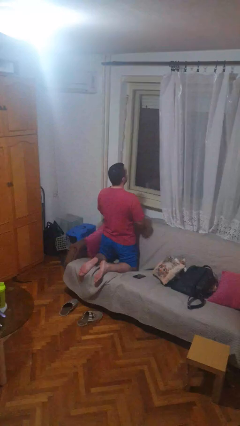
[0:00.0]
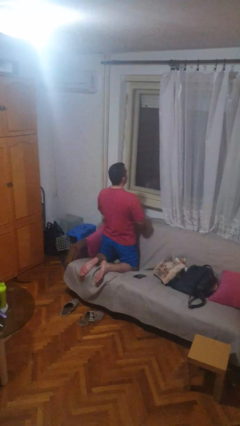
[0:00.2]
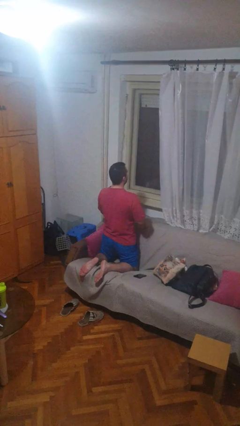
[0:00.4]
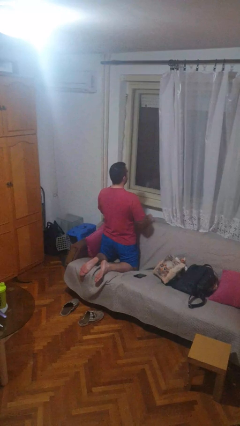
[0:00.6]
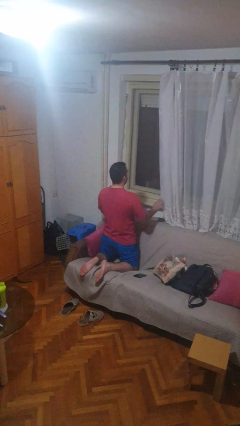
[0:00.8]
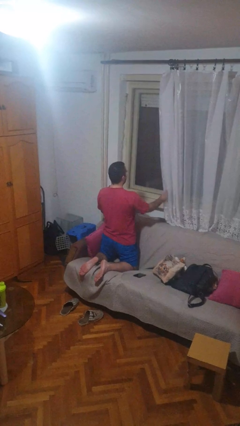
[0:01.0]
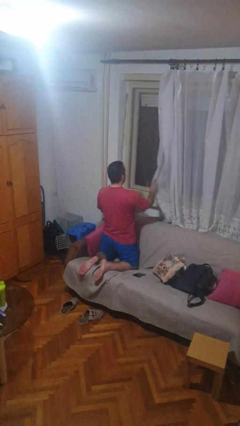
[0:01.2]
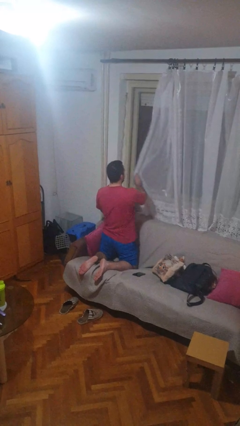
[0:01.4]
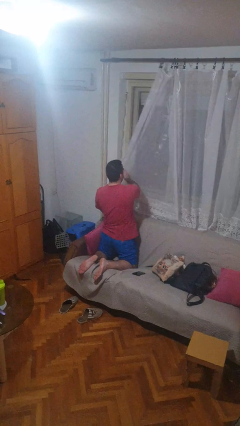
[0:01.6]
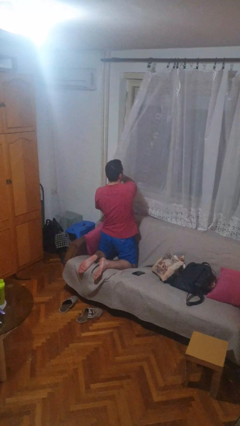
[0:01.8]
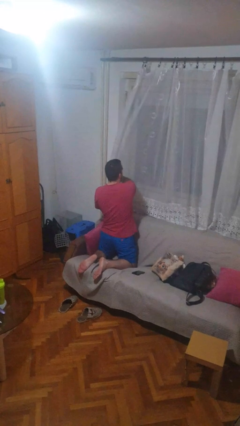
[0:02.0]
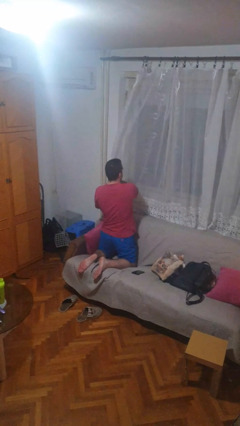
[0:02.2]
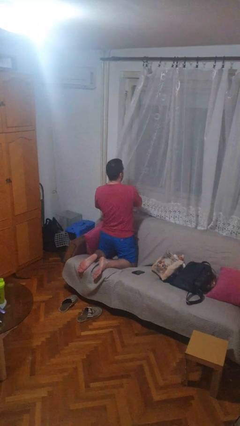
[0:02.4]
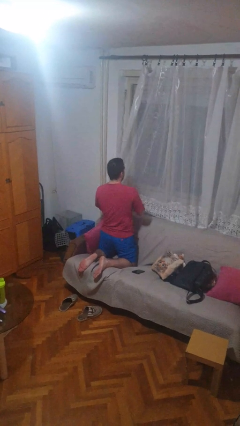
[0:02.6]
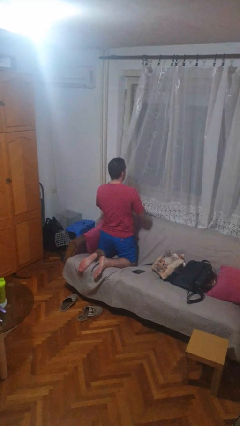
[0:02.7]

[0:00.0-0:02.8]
person closes curtains

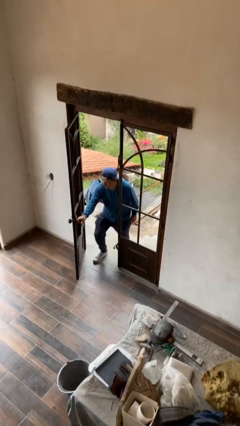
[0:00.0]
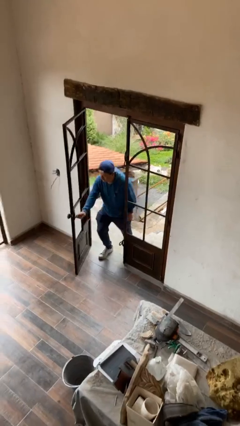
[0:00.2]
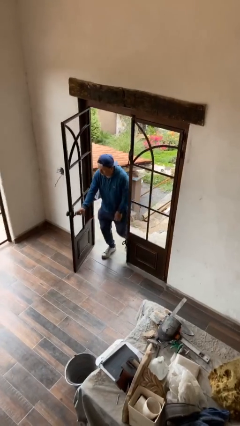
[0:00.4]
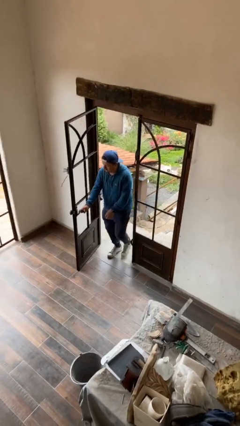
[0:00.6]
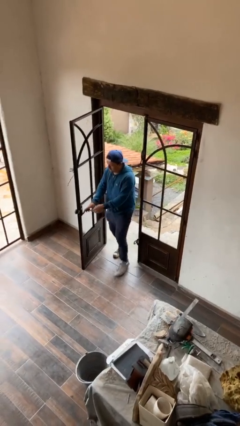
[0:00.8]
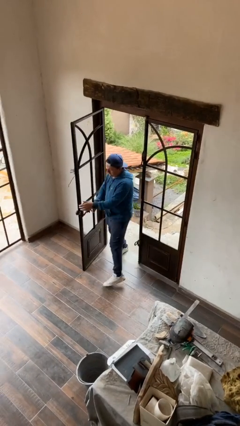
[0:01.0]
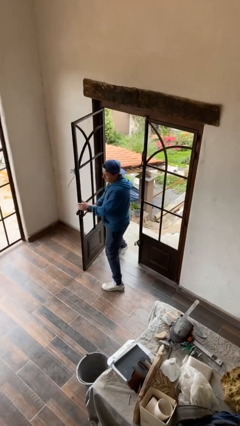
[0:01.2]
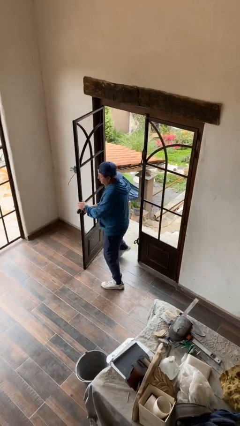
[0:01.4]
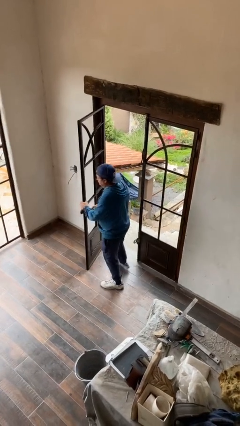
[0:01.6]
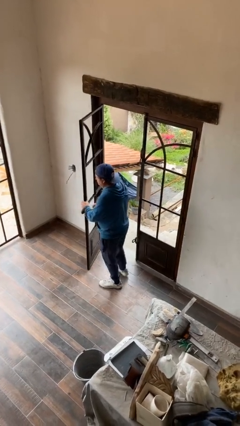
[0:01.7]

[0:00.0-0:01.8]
person enters scene through structure

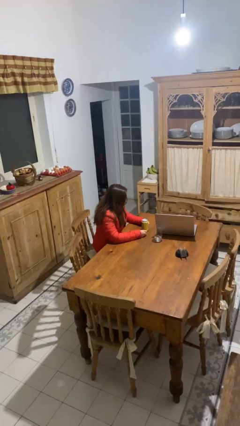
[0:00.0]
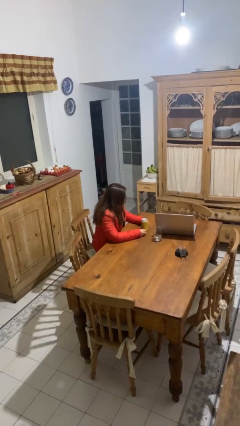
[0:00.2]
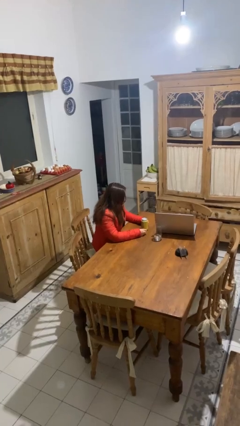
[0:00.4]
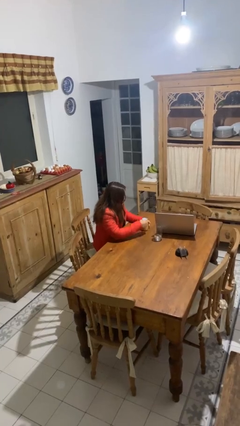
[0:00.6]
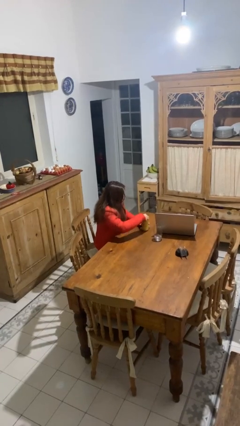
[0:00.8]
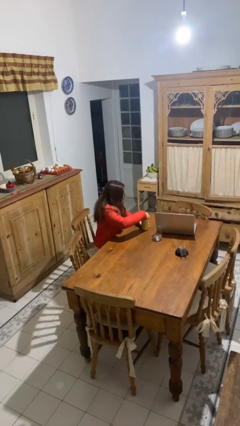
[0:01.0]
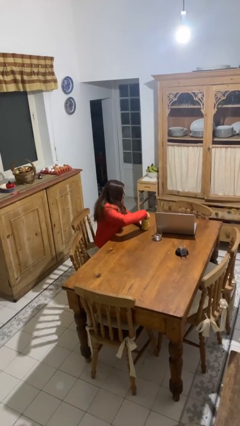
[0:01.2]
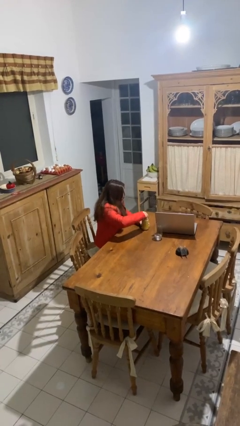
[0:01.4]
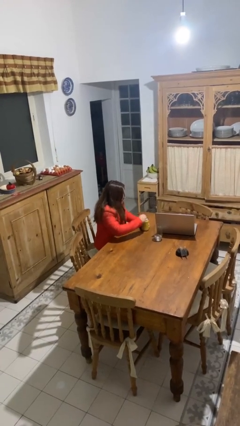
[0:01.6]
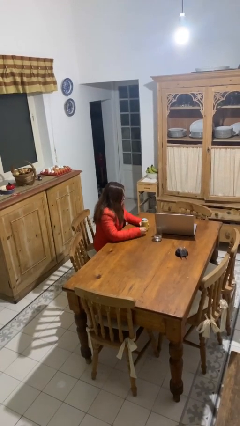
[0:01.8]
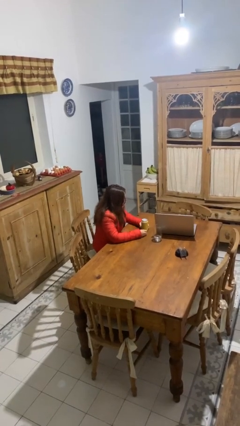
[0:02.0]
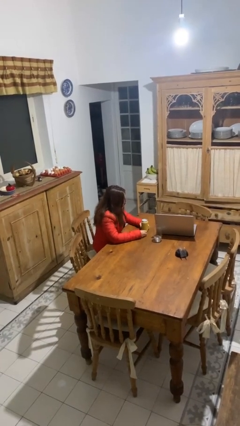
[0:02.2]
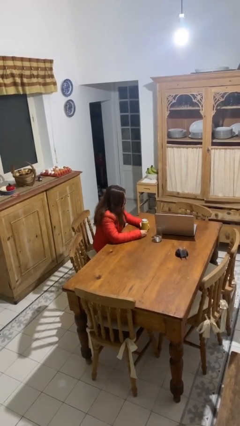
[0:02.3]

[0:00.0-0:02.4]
person opens beverage can

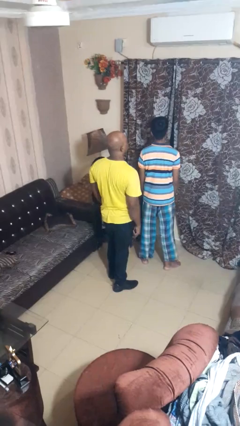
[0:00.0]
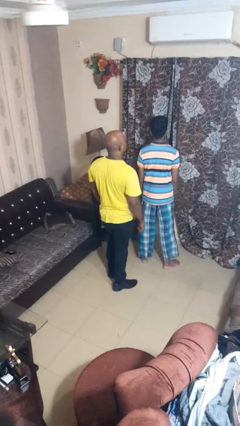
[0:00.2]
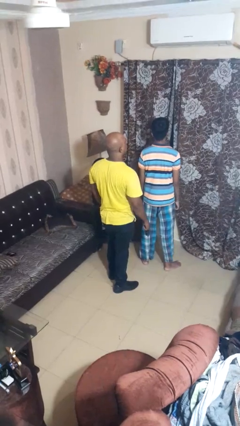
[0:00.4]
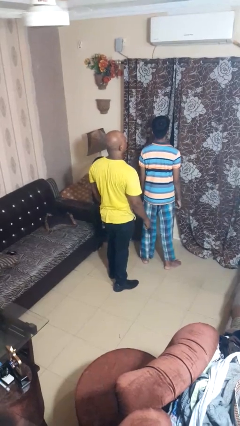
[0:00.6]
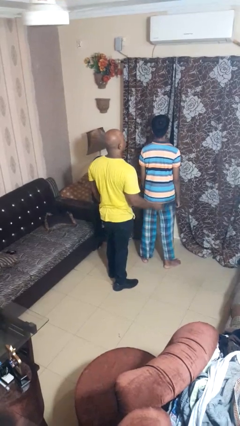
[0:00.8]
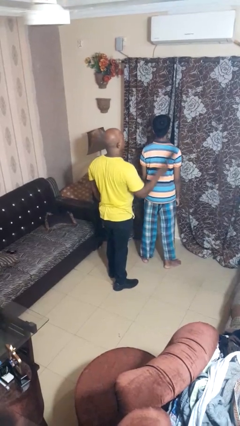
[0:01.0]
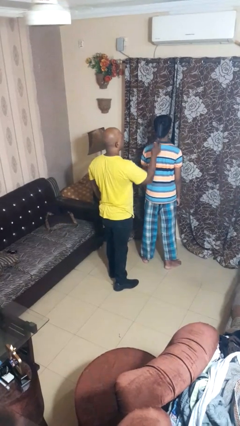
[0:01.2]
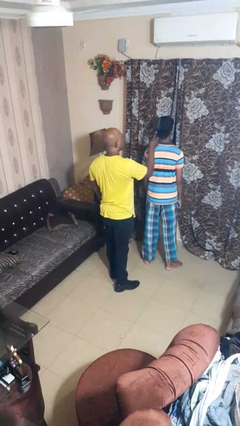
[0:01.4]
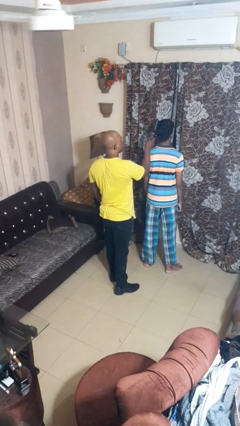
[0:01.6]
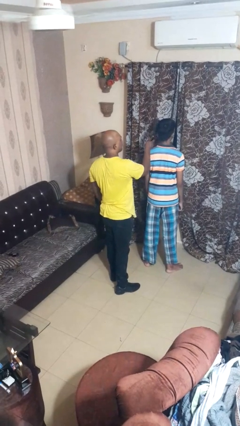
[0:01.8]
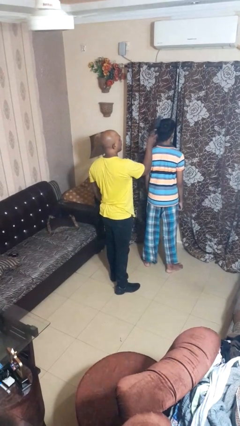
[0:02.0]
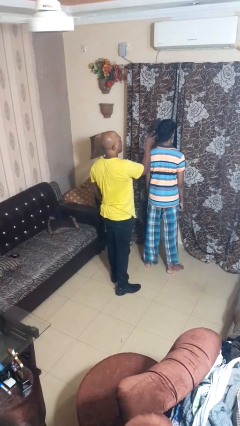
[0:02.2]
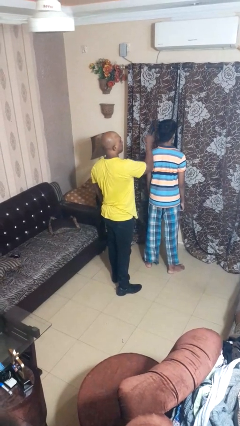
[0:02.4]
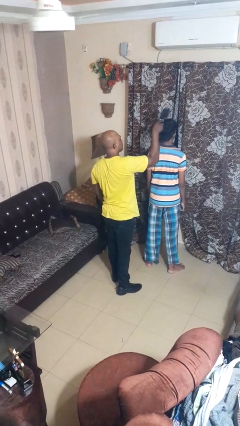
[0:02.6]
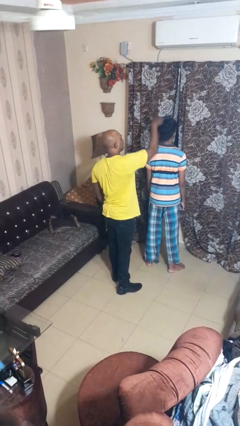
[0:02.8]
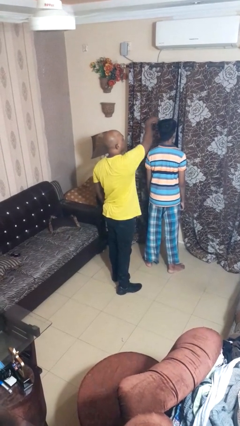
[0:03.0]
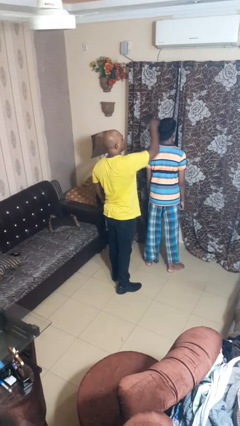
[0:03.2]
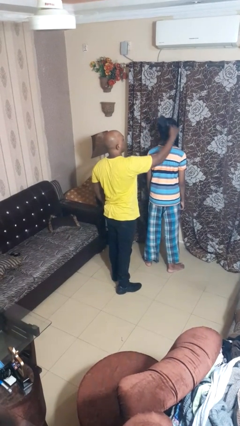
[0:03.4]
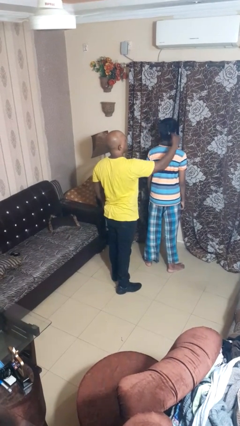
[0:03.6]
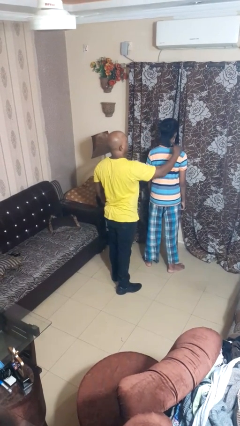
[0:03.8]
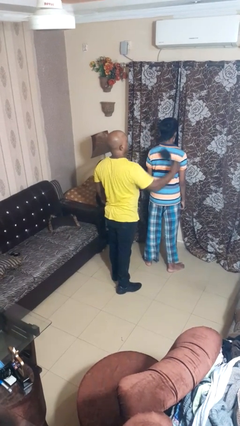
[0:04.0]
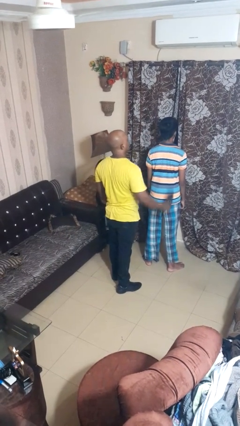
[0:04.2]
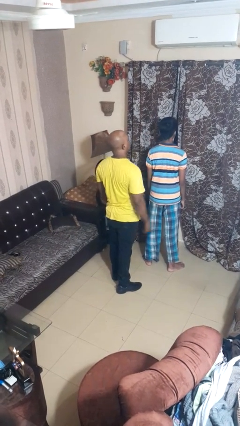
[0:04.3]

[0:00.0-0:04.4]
person brushes hair of person

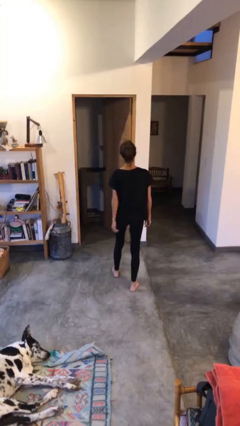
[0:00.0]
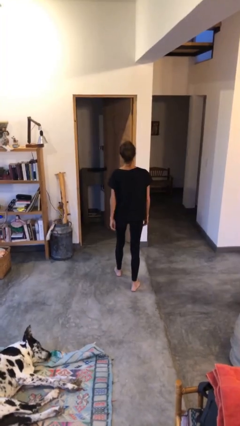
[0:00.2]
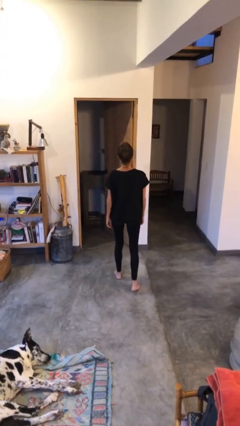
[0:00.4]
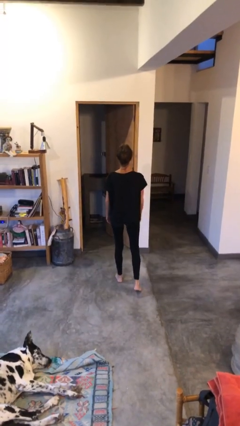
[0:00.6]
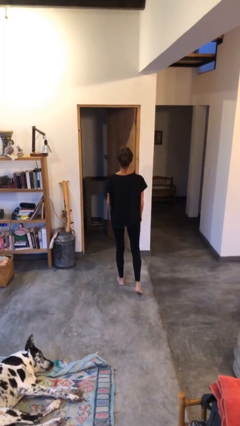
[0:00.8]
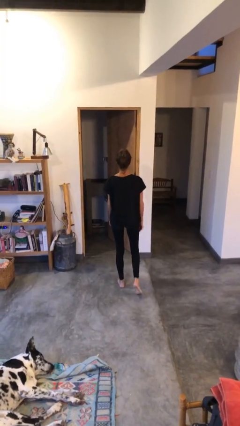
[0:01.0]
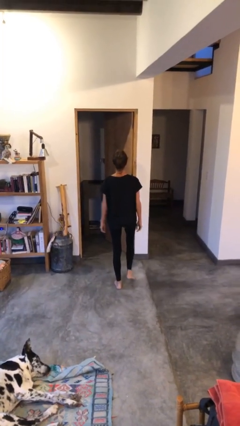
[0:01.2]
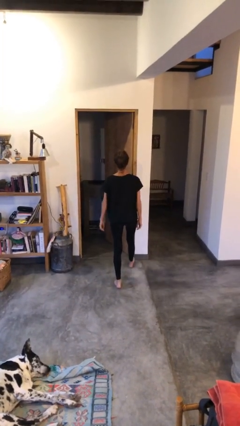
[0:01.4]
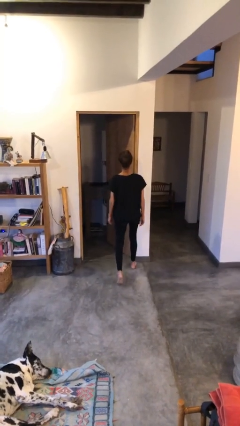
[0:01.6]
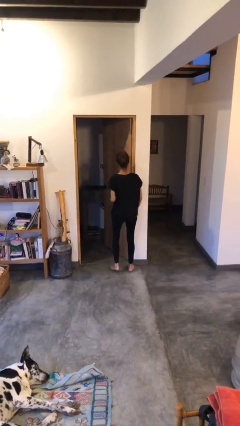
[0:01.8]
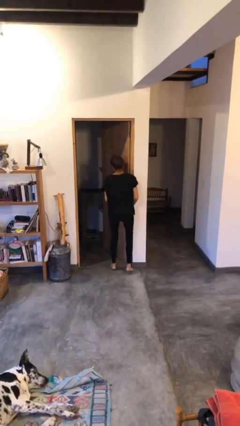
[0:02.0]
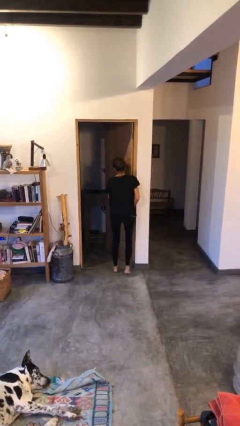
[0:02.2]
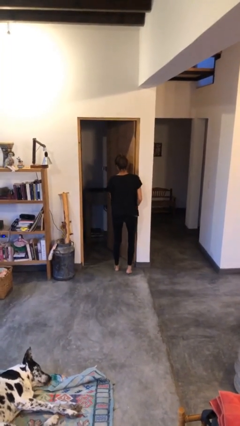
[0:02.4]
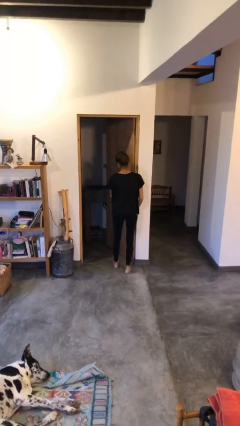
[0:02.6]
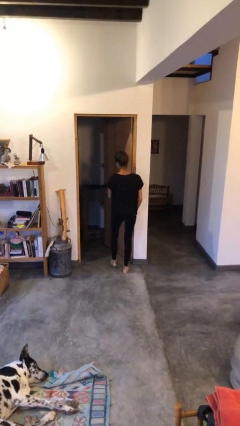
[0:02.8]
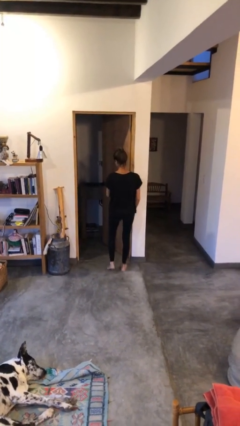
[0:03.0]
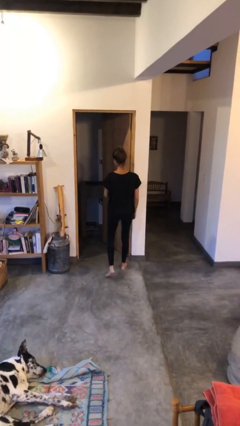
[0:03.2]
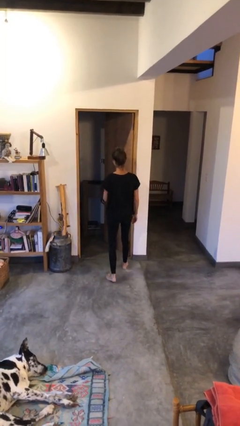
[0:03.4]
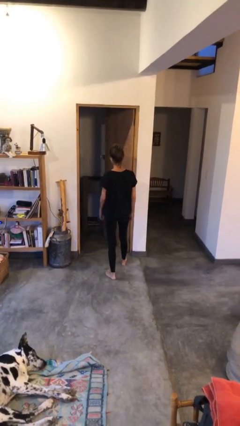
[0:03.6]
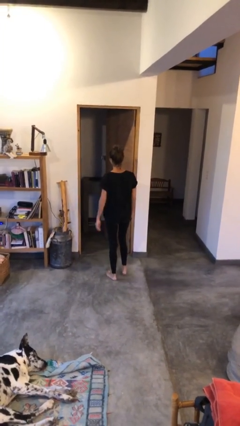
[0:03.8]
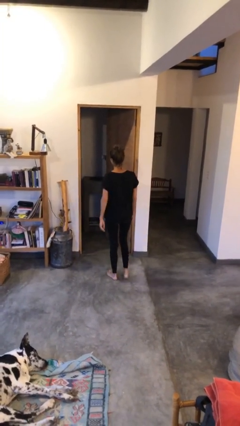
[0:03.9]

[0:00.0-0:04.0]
person bumps into wall

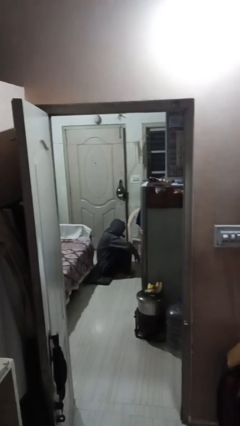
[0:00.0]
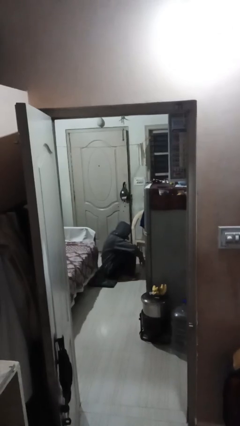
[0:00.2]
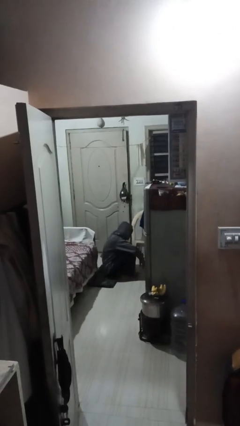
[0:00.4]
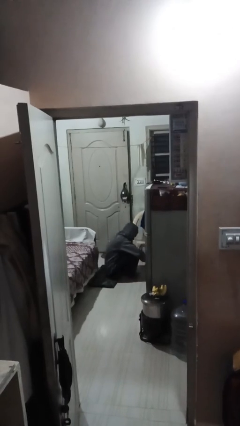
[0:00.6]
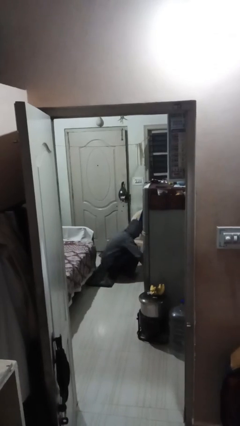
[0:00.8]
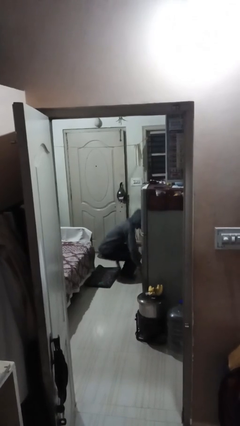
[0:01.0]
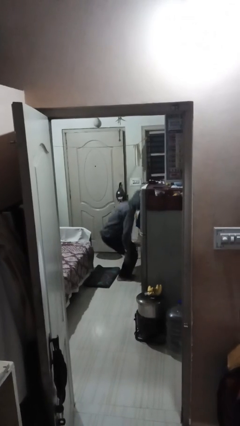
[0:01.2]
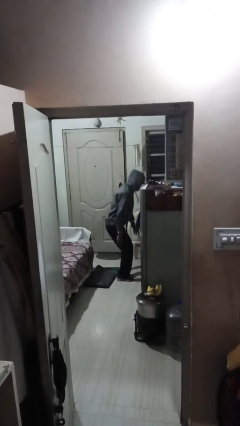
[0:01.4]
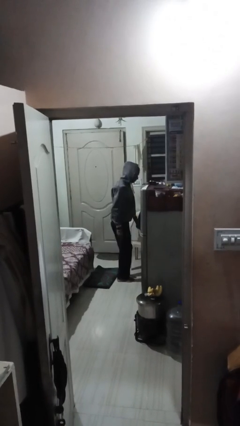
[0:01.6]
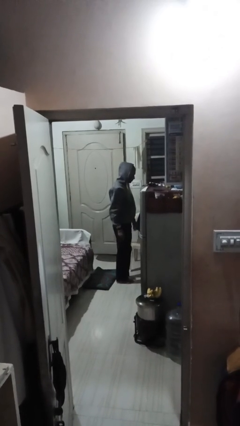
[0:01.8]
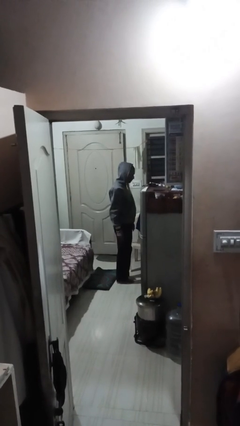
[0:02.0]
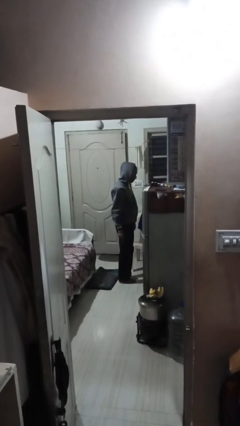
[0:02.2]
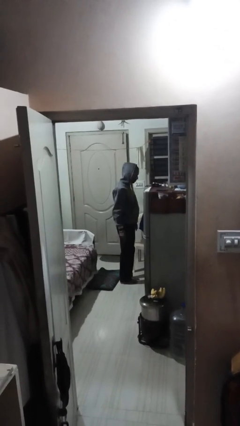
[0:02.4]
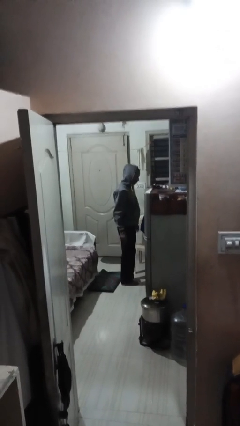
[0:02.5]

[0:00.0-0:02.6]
person stands up
